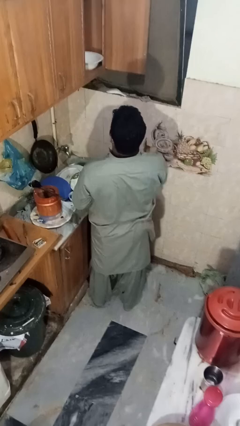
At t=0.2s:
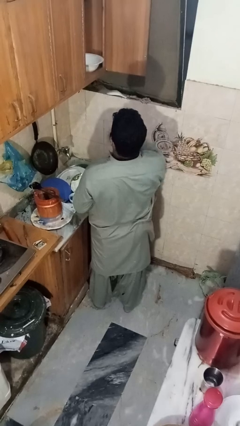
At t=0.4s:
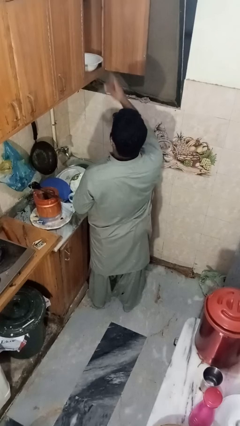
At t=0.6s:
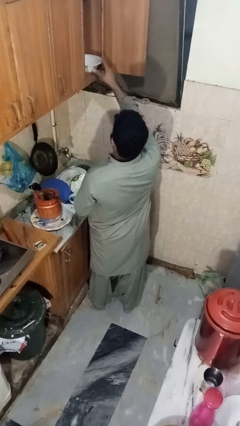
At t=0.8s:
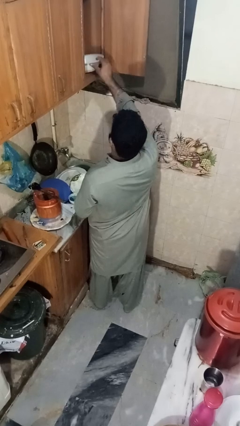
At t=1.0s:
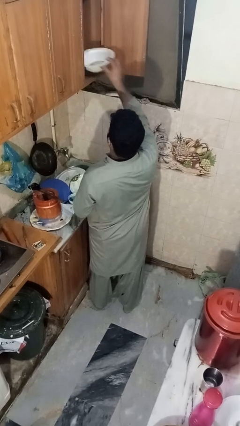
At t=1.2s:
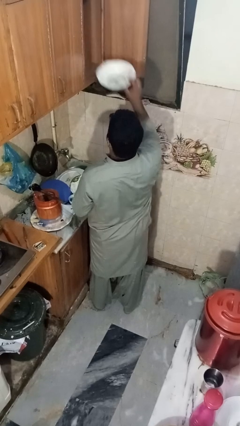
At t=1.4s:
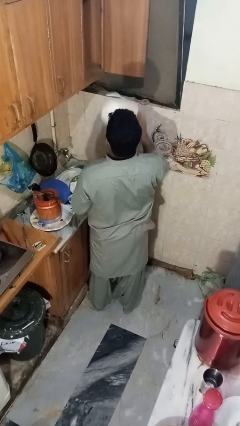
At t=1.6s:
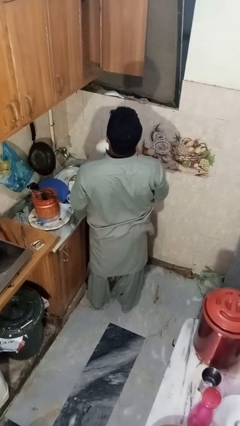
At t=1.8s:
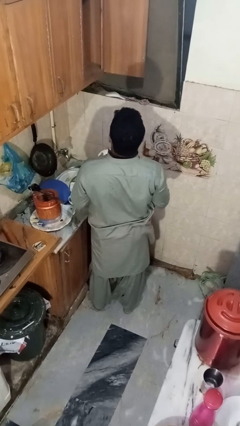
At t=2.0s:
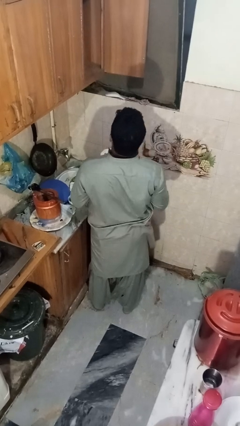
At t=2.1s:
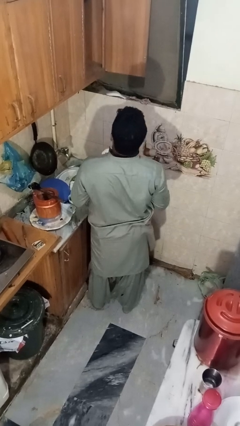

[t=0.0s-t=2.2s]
person takes object from cabinet

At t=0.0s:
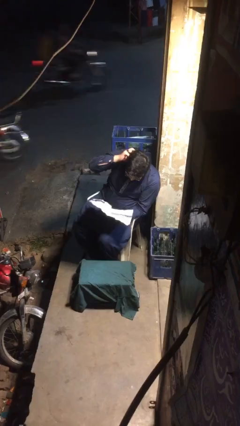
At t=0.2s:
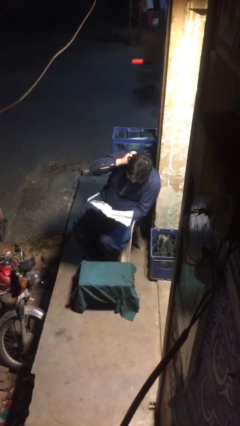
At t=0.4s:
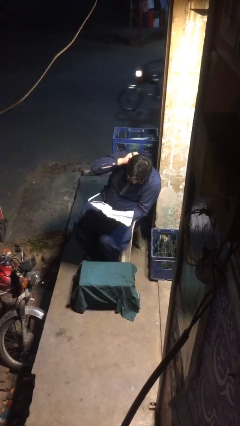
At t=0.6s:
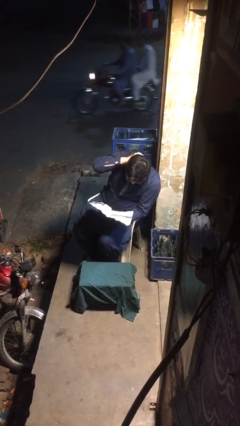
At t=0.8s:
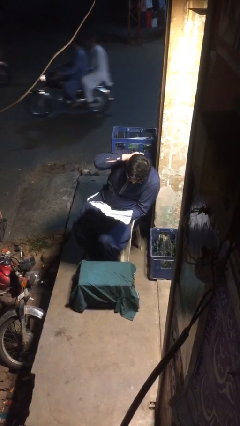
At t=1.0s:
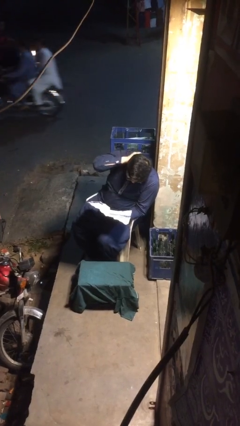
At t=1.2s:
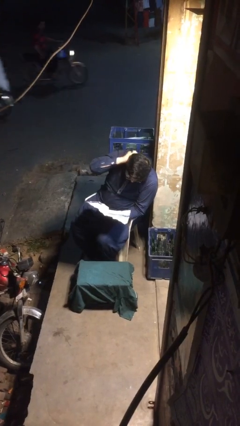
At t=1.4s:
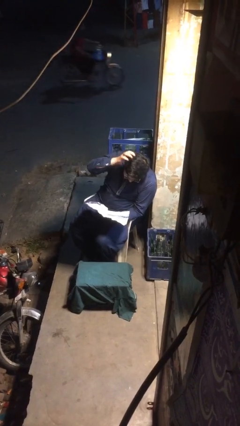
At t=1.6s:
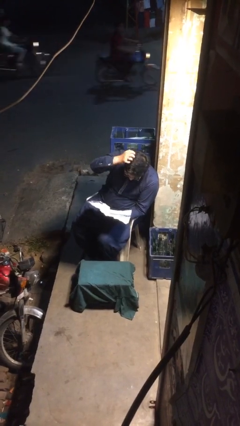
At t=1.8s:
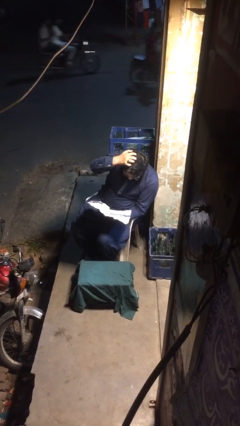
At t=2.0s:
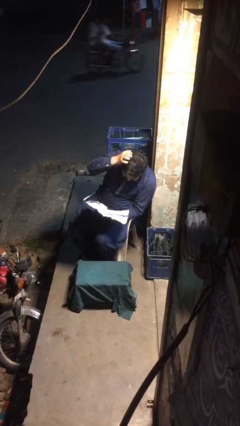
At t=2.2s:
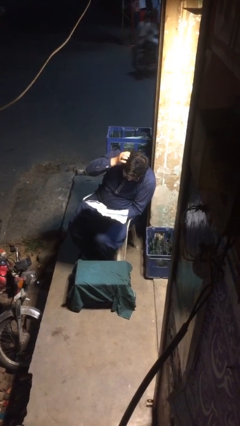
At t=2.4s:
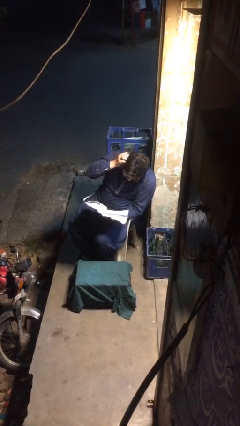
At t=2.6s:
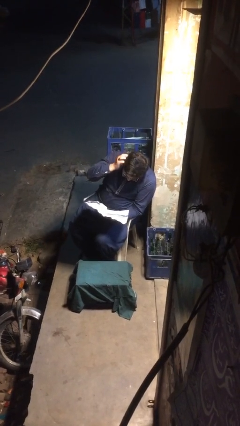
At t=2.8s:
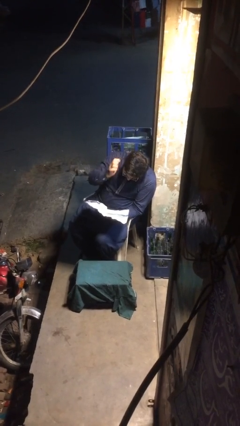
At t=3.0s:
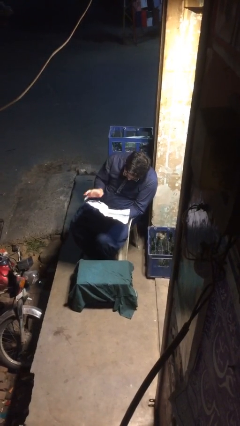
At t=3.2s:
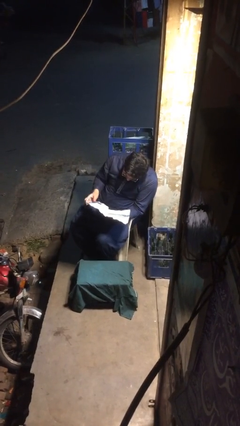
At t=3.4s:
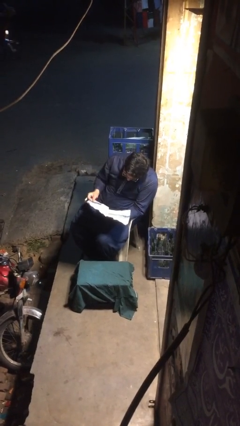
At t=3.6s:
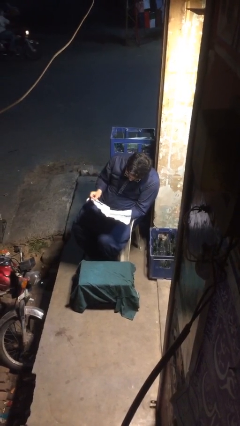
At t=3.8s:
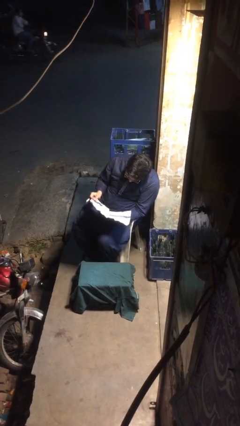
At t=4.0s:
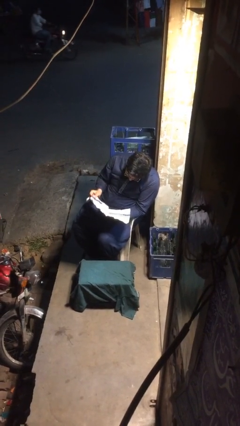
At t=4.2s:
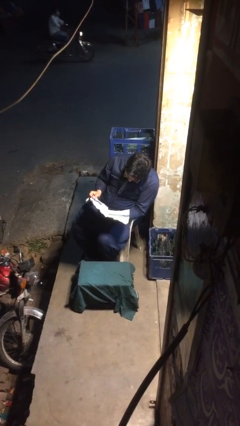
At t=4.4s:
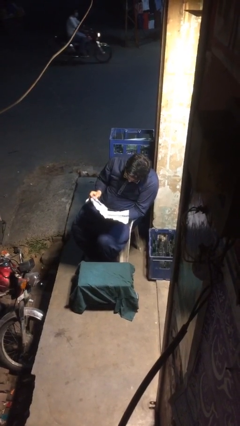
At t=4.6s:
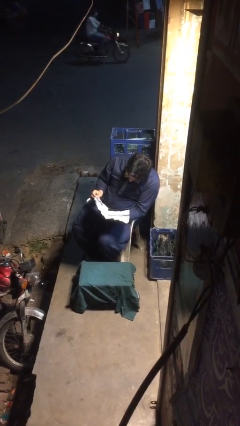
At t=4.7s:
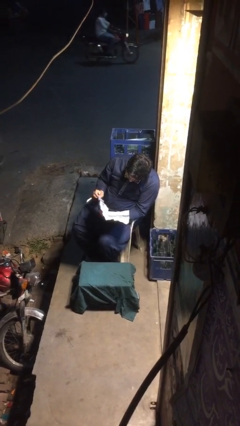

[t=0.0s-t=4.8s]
person reads document

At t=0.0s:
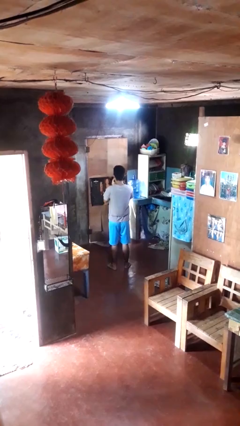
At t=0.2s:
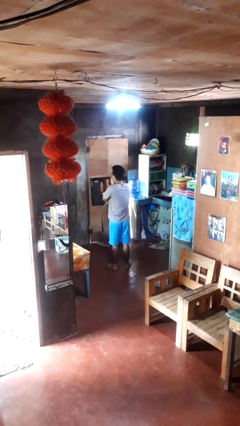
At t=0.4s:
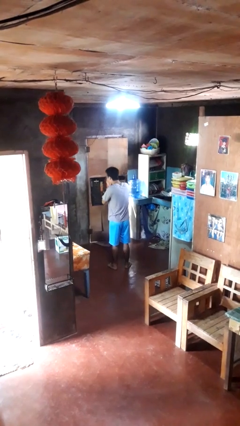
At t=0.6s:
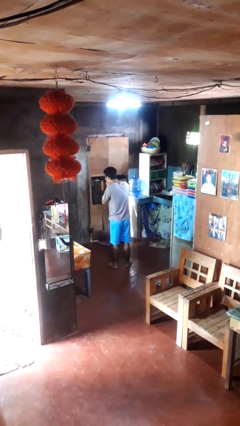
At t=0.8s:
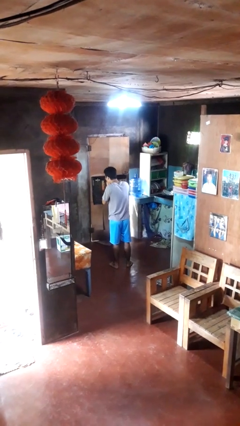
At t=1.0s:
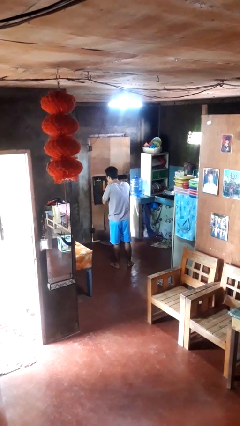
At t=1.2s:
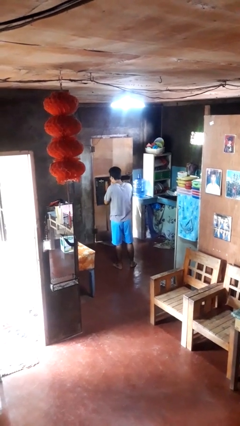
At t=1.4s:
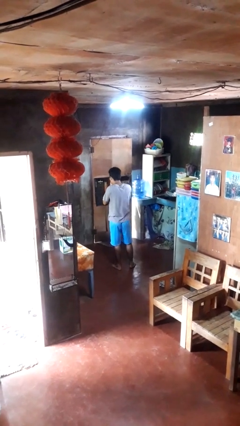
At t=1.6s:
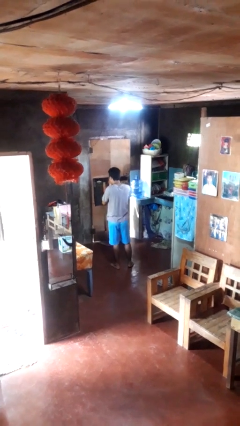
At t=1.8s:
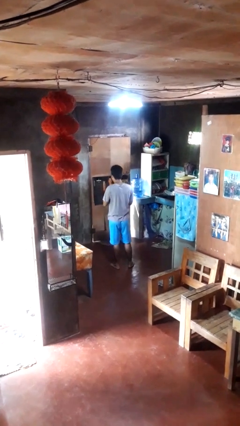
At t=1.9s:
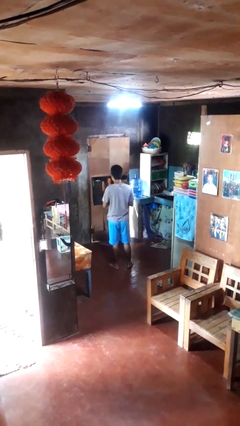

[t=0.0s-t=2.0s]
person sneezes into hand

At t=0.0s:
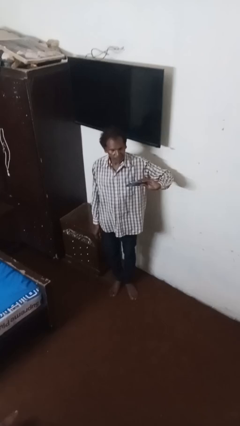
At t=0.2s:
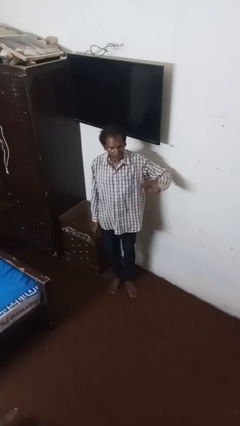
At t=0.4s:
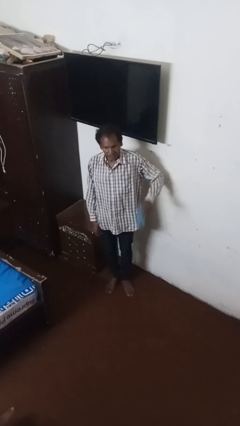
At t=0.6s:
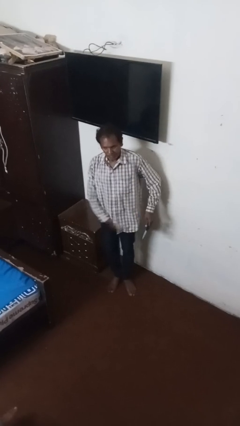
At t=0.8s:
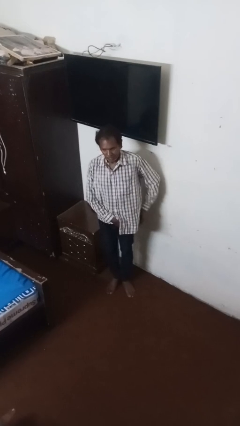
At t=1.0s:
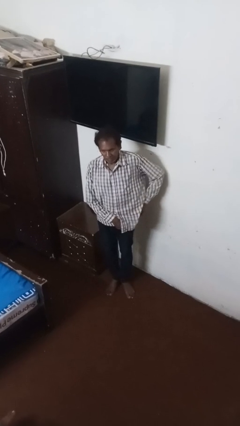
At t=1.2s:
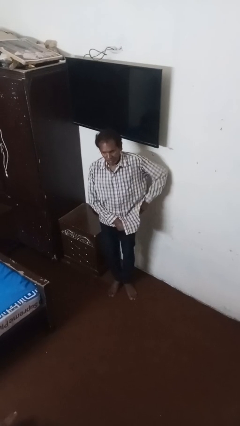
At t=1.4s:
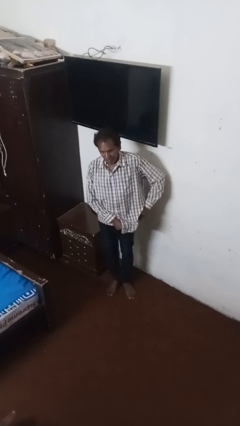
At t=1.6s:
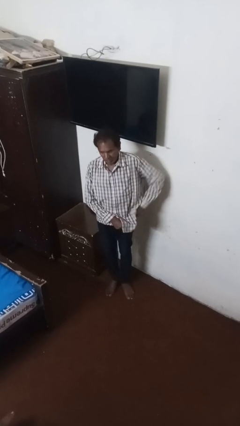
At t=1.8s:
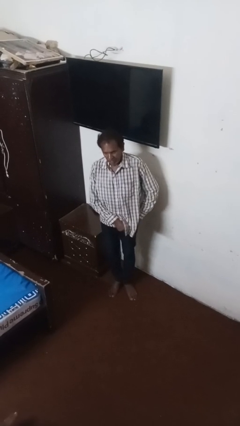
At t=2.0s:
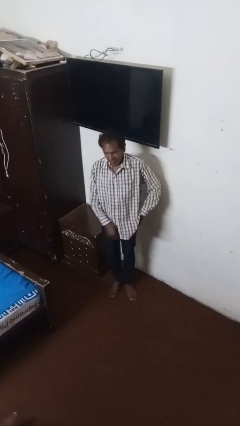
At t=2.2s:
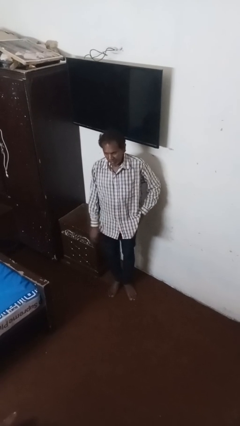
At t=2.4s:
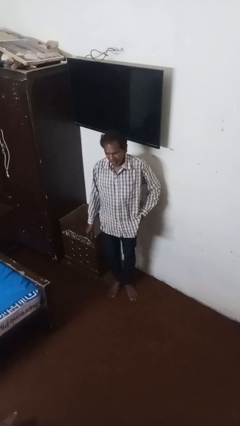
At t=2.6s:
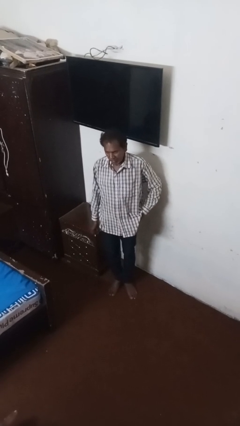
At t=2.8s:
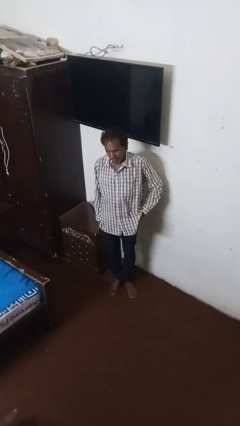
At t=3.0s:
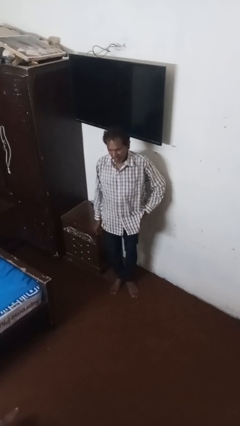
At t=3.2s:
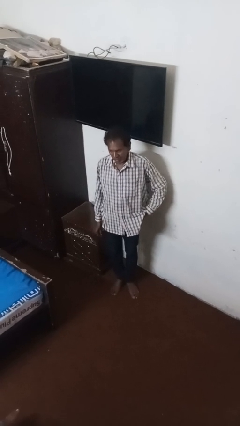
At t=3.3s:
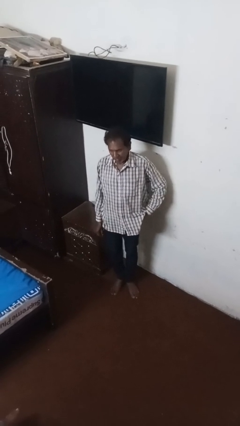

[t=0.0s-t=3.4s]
person puts phone into pocket

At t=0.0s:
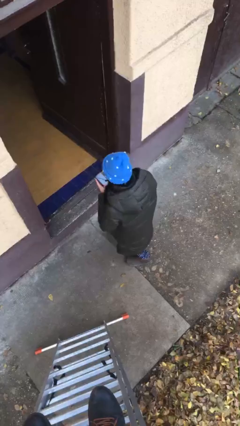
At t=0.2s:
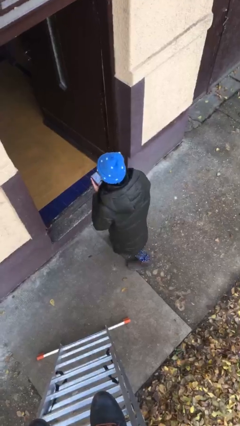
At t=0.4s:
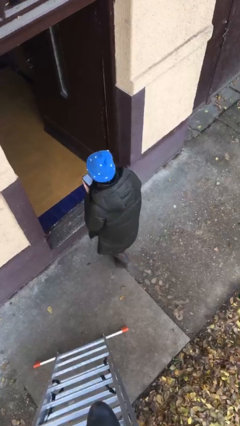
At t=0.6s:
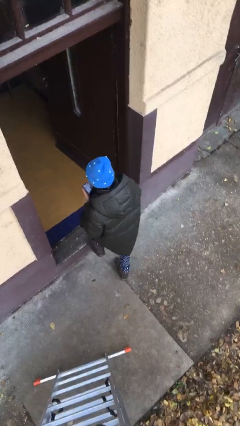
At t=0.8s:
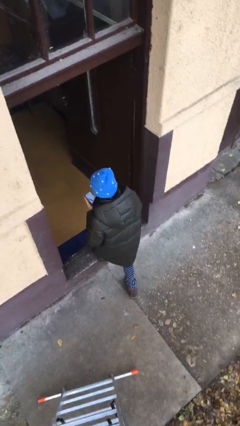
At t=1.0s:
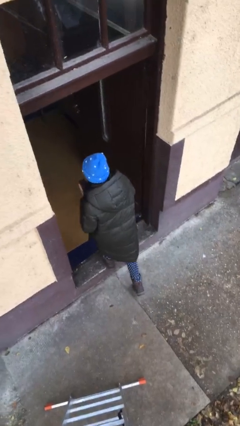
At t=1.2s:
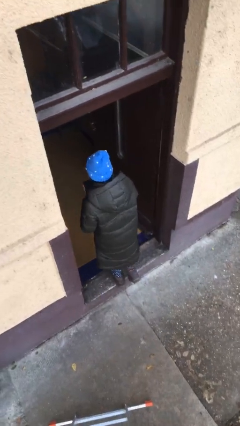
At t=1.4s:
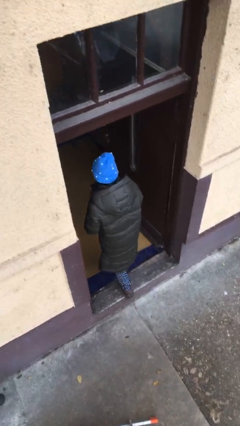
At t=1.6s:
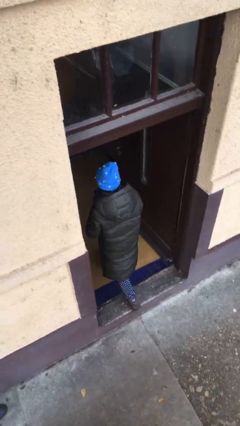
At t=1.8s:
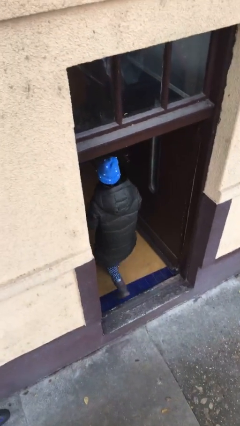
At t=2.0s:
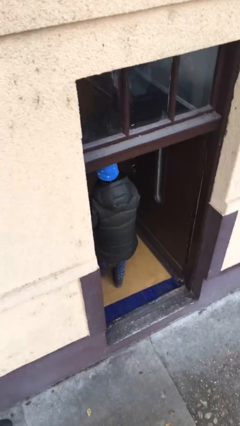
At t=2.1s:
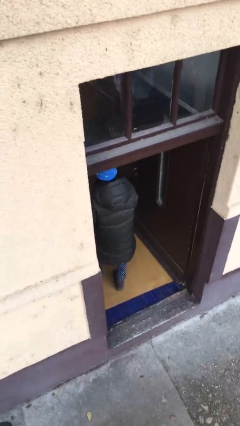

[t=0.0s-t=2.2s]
person exits scene through structure

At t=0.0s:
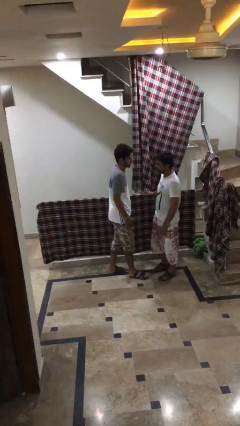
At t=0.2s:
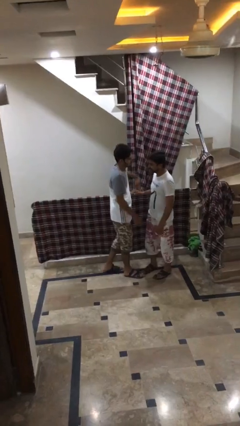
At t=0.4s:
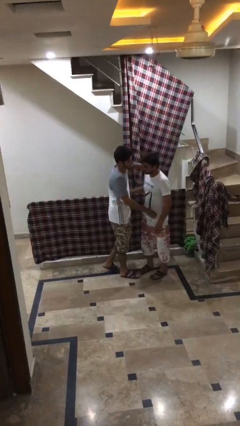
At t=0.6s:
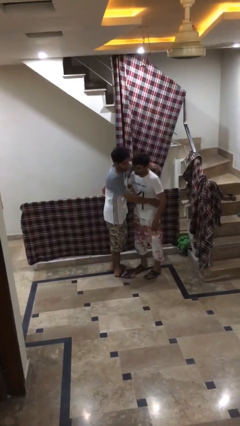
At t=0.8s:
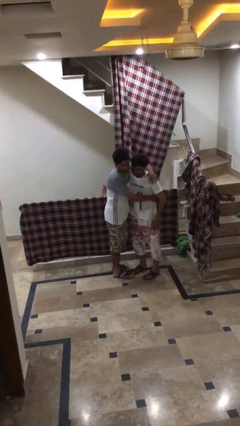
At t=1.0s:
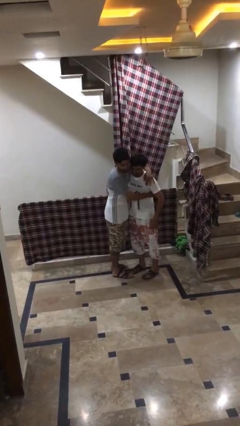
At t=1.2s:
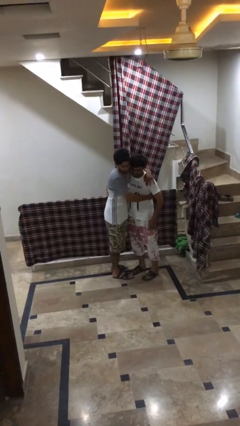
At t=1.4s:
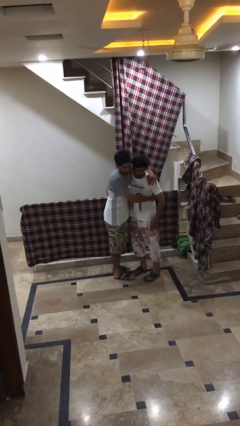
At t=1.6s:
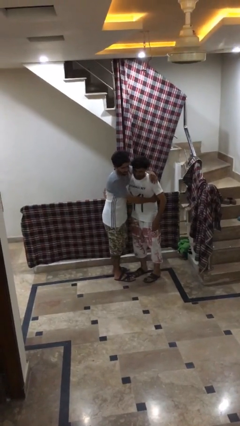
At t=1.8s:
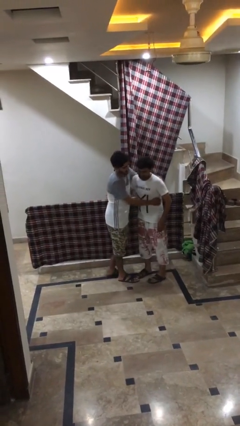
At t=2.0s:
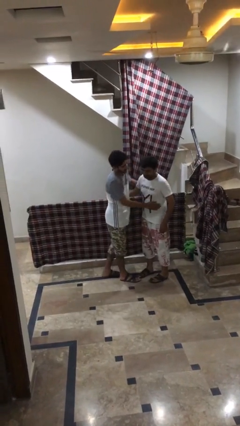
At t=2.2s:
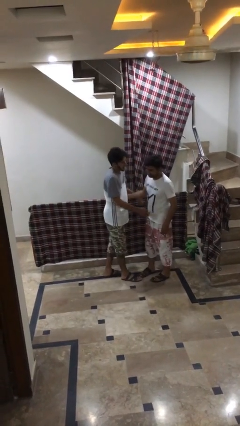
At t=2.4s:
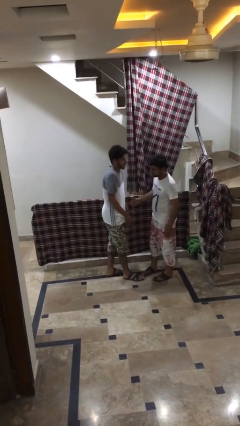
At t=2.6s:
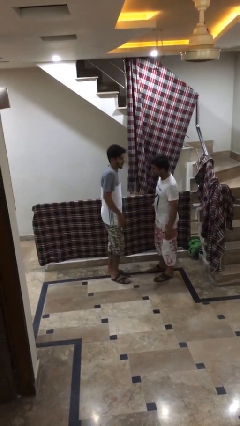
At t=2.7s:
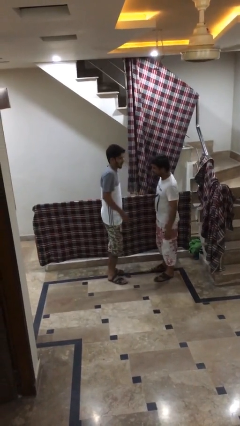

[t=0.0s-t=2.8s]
person embraces person
